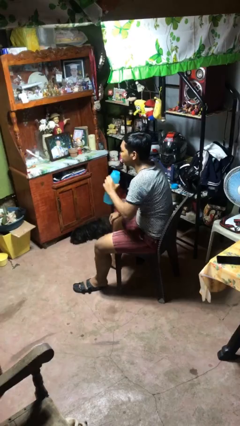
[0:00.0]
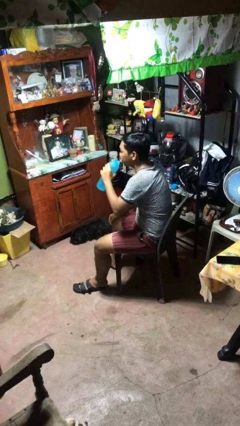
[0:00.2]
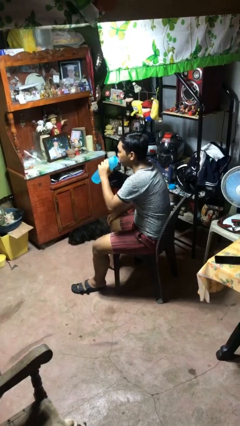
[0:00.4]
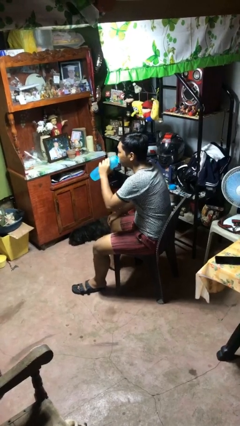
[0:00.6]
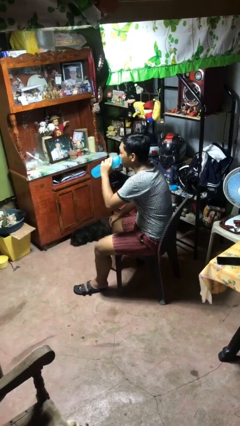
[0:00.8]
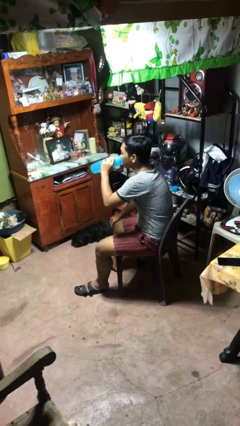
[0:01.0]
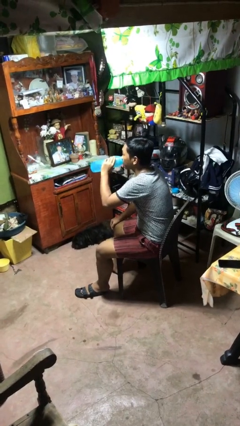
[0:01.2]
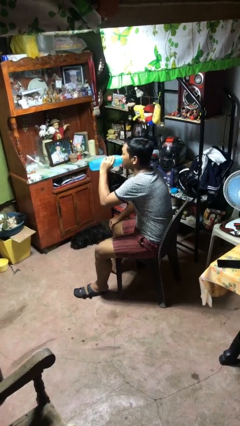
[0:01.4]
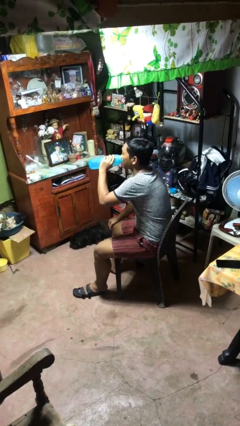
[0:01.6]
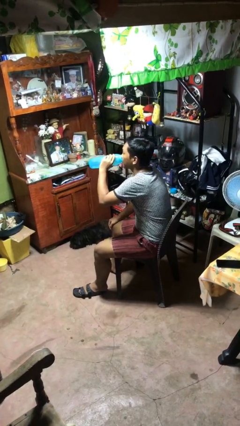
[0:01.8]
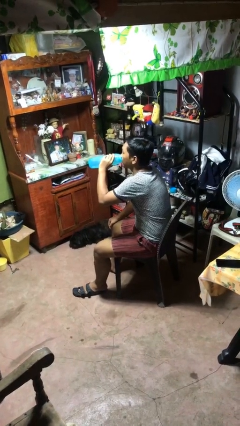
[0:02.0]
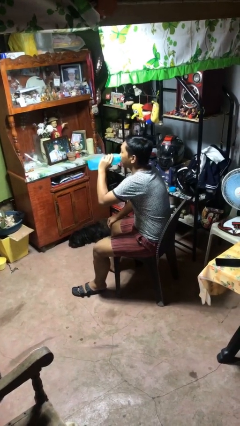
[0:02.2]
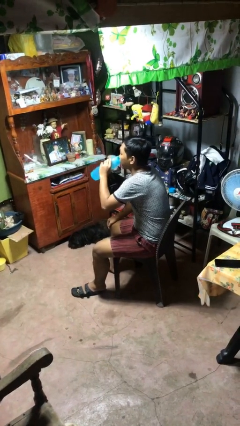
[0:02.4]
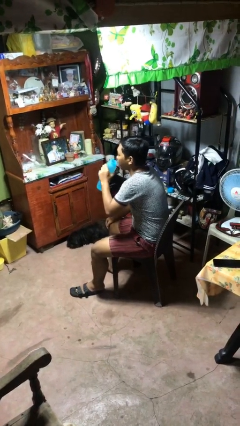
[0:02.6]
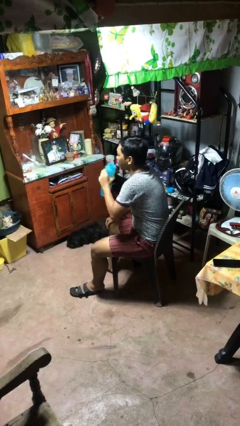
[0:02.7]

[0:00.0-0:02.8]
person drinks from bottle

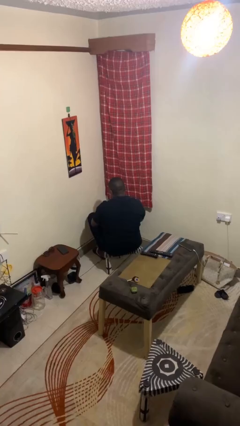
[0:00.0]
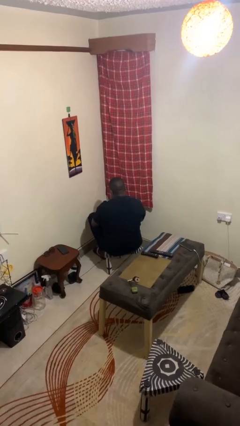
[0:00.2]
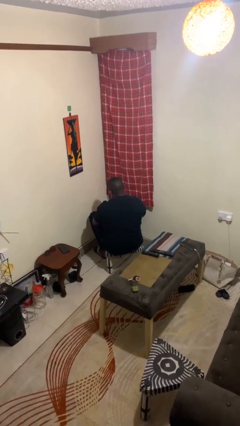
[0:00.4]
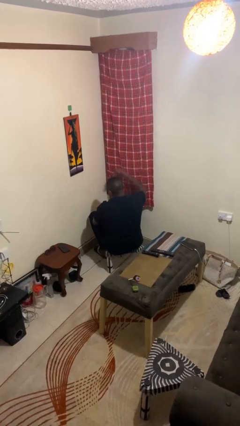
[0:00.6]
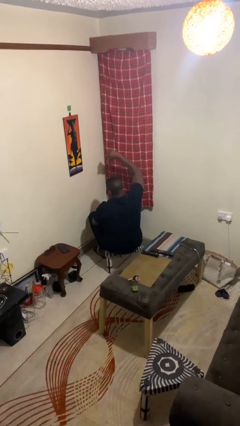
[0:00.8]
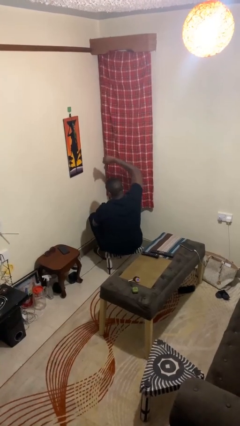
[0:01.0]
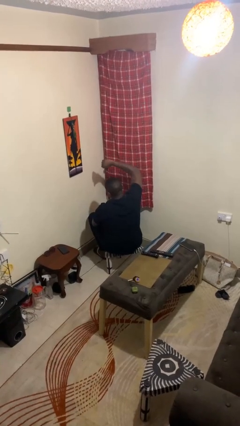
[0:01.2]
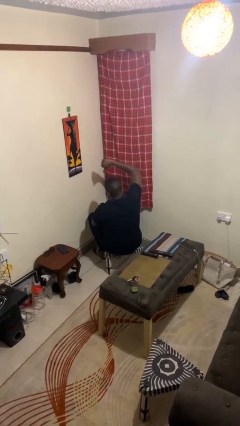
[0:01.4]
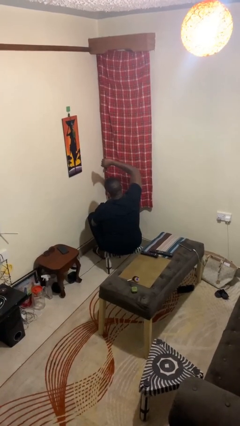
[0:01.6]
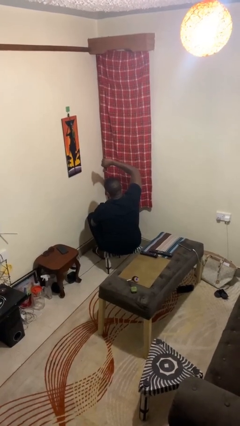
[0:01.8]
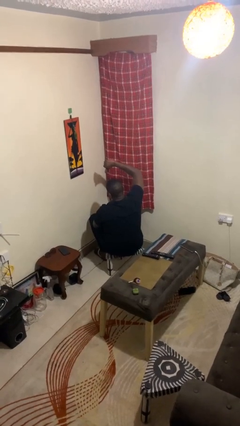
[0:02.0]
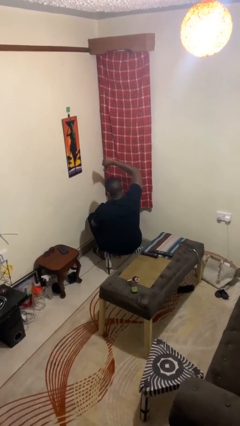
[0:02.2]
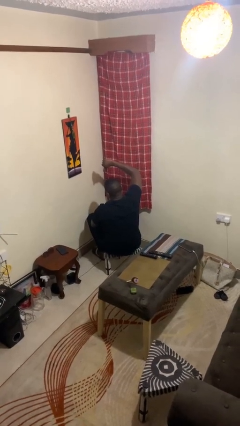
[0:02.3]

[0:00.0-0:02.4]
person gestures thumbs down

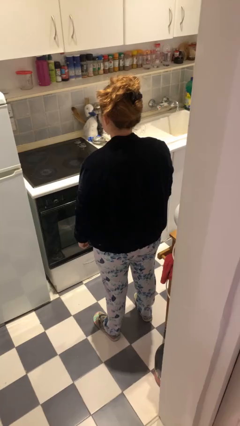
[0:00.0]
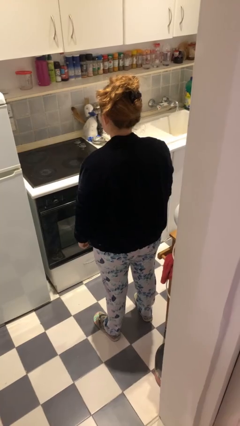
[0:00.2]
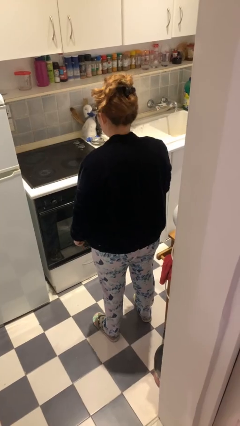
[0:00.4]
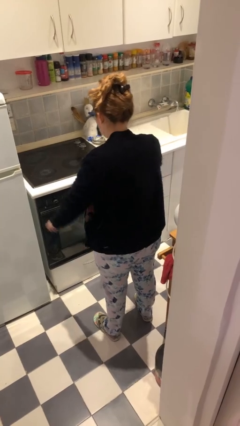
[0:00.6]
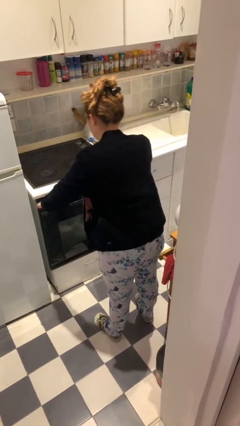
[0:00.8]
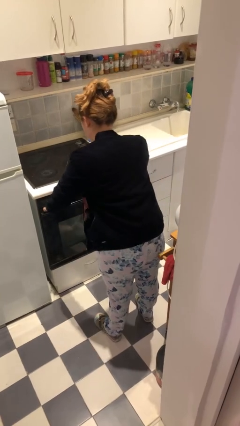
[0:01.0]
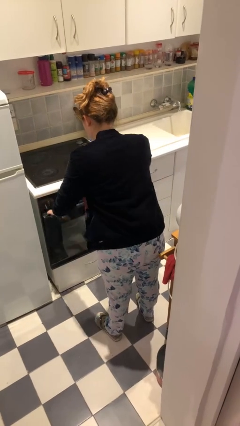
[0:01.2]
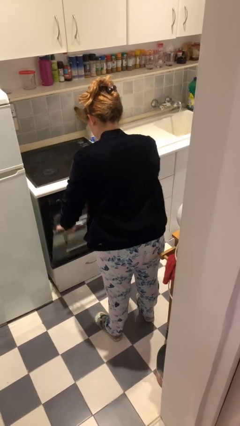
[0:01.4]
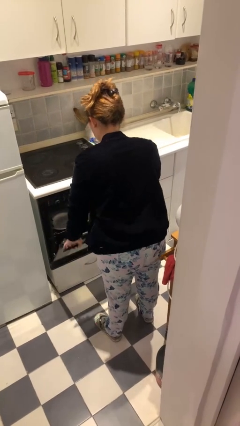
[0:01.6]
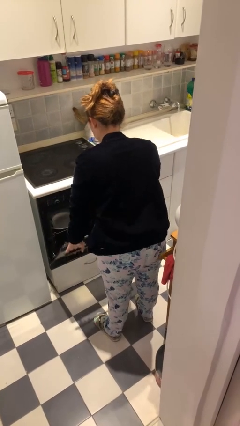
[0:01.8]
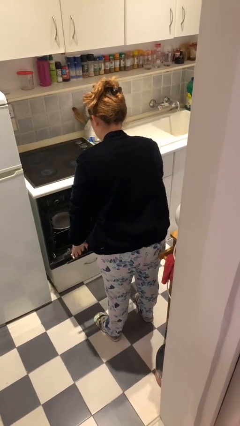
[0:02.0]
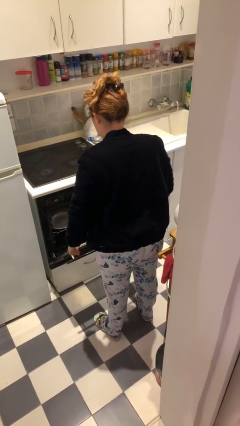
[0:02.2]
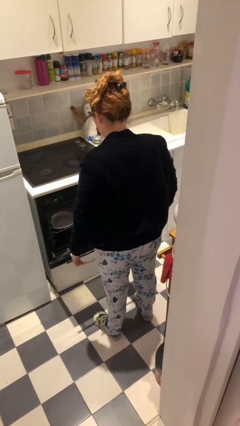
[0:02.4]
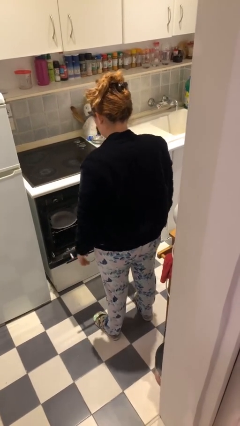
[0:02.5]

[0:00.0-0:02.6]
person opens dishwasher

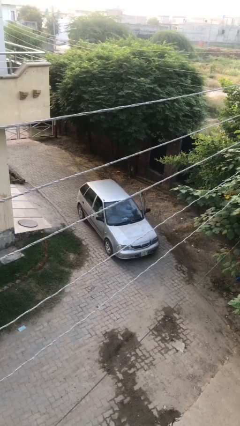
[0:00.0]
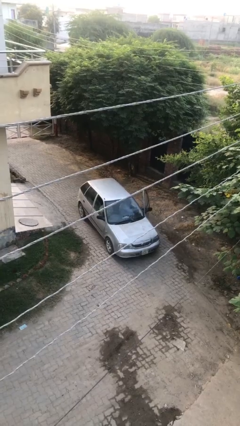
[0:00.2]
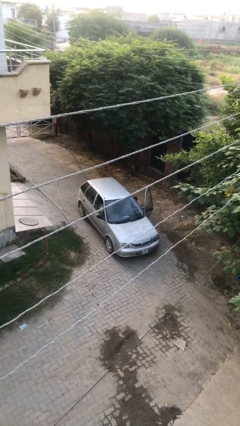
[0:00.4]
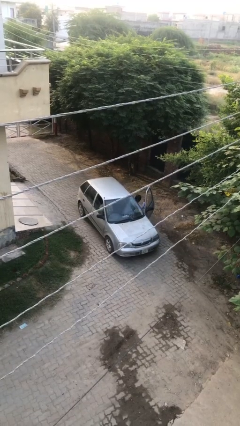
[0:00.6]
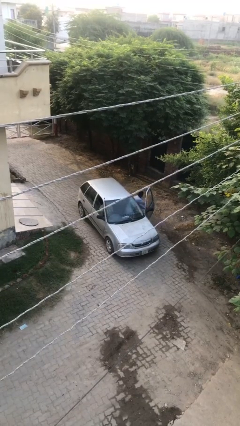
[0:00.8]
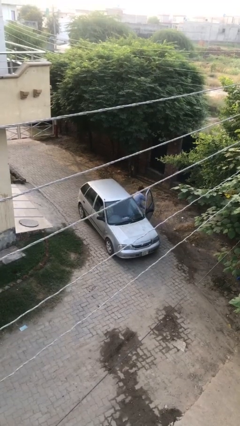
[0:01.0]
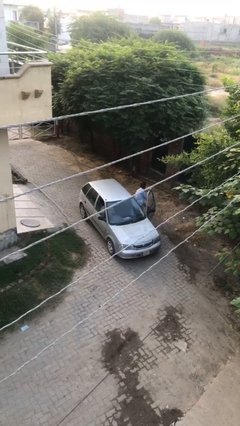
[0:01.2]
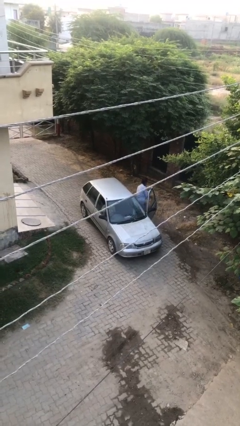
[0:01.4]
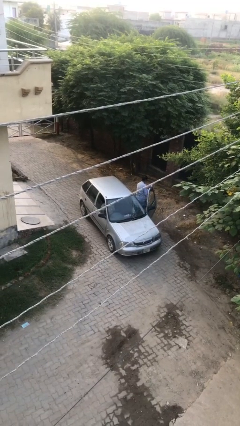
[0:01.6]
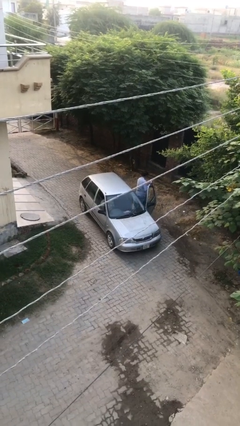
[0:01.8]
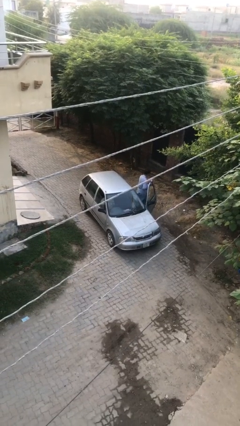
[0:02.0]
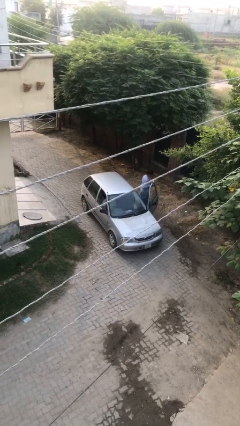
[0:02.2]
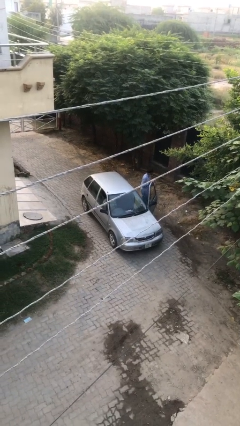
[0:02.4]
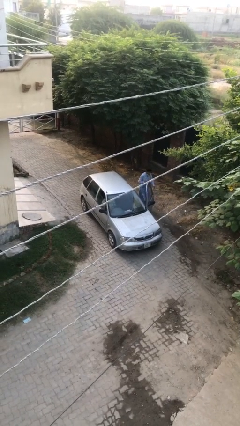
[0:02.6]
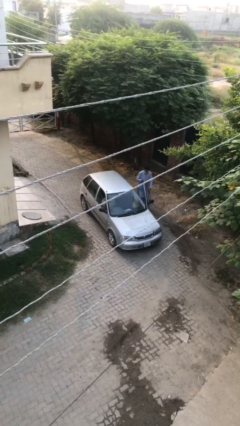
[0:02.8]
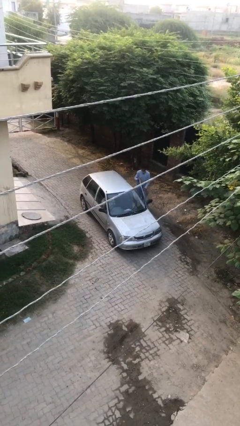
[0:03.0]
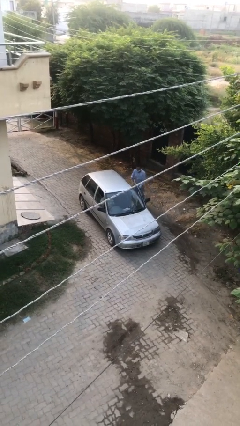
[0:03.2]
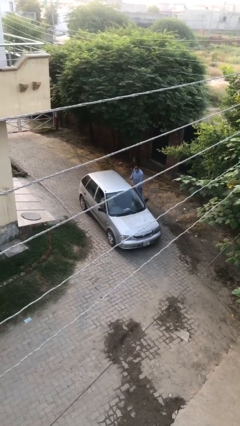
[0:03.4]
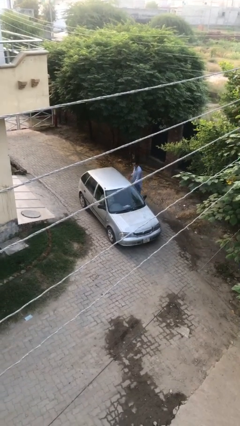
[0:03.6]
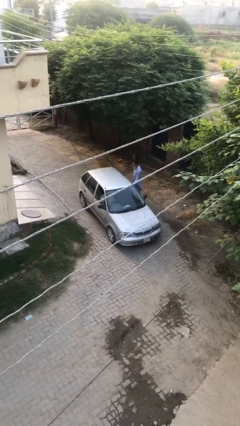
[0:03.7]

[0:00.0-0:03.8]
car drops off person

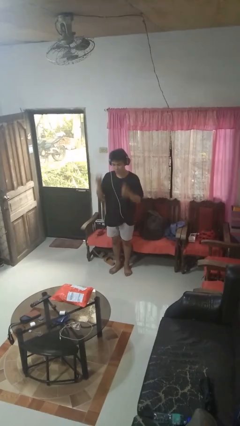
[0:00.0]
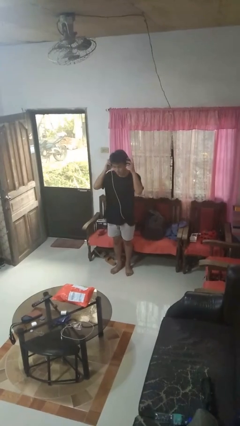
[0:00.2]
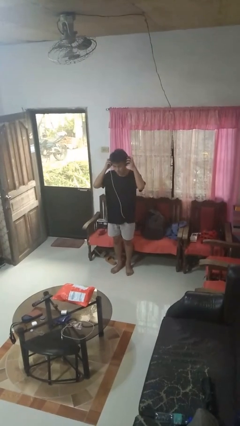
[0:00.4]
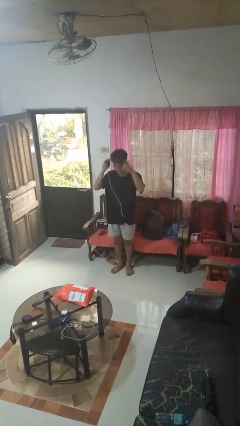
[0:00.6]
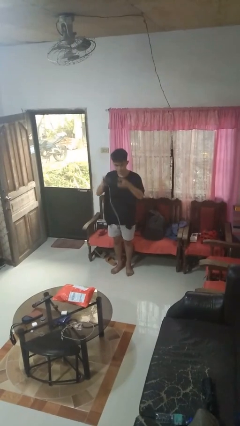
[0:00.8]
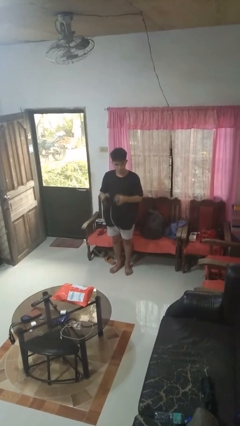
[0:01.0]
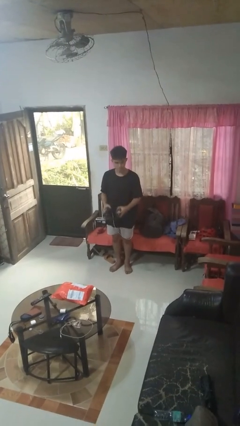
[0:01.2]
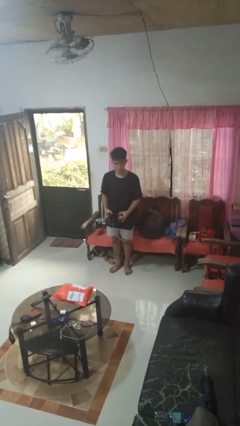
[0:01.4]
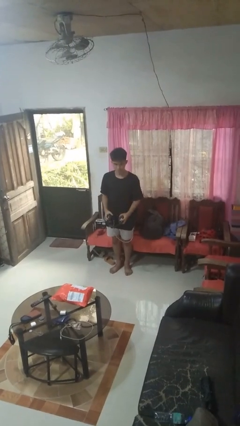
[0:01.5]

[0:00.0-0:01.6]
person takes off headphones

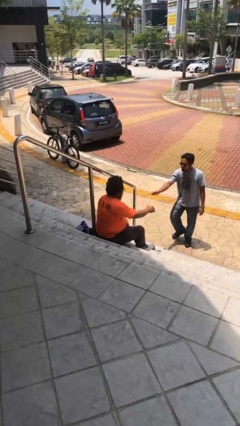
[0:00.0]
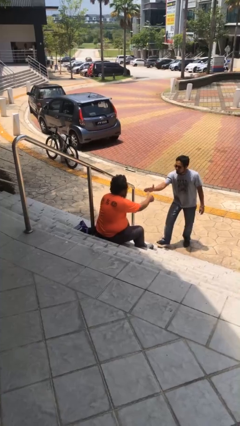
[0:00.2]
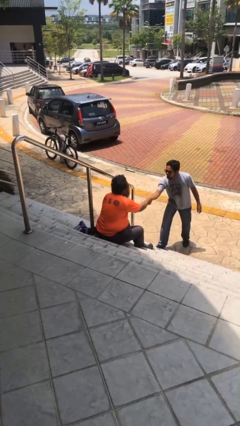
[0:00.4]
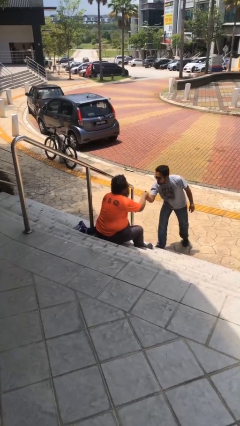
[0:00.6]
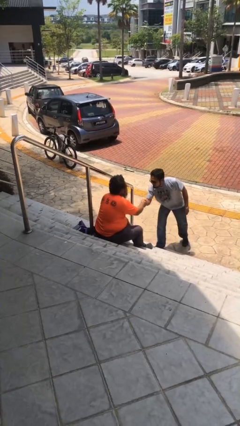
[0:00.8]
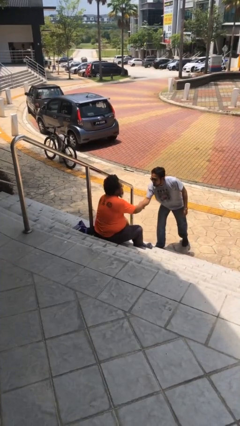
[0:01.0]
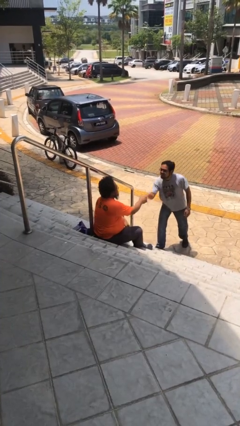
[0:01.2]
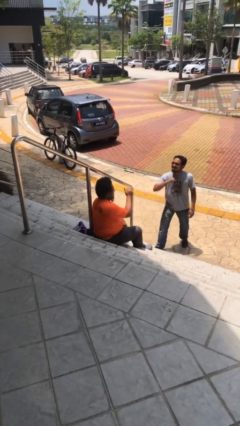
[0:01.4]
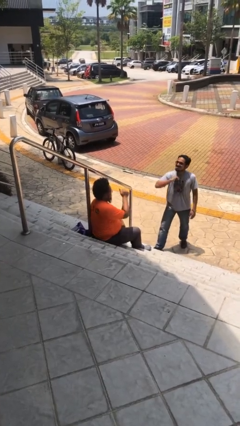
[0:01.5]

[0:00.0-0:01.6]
person shakes hand

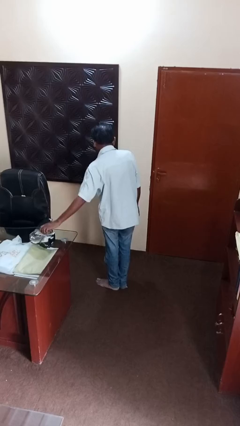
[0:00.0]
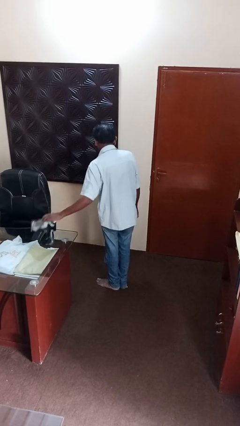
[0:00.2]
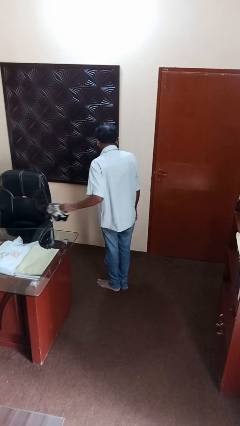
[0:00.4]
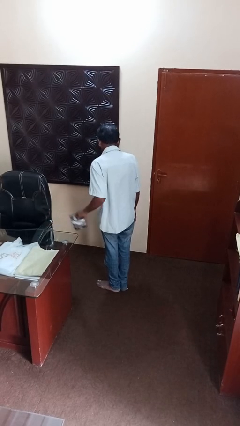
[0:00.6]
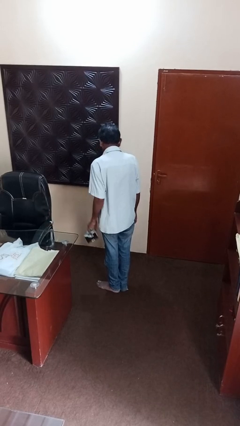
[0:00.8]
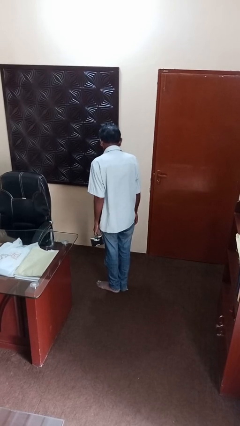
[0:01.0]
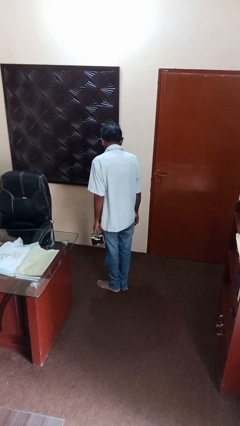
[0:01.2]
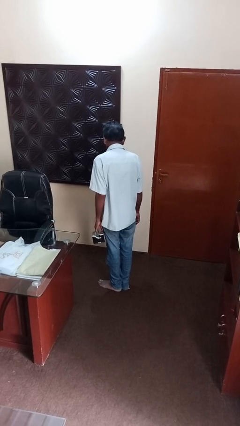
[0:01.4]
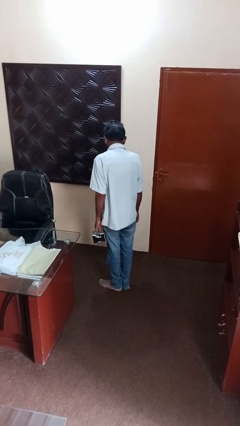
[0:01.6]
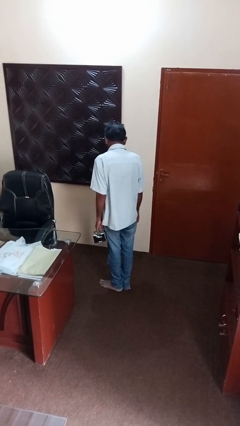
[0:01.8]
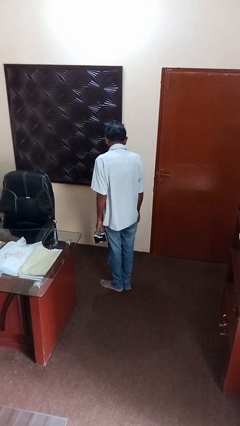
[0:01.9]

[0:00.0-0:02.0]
person picks up object from table
